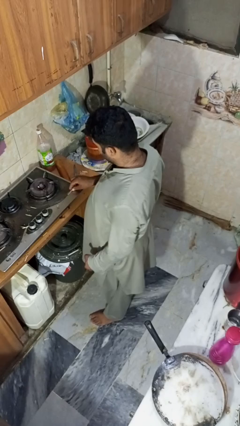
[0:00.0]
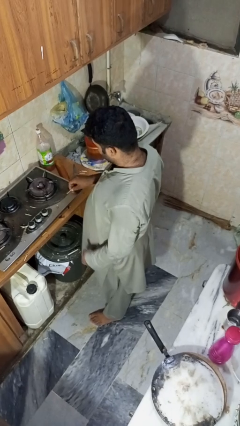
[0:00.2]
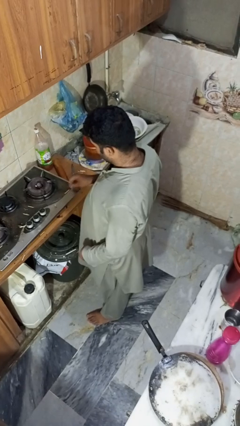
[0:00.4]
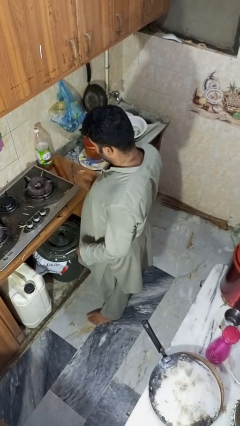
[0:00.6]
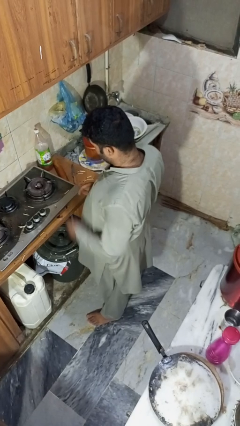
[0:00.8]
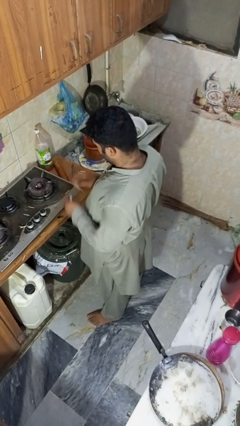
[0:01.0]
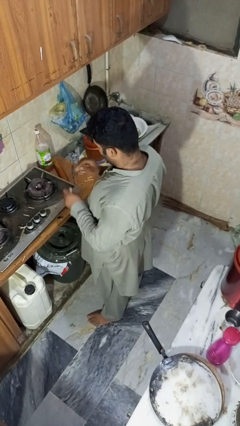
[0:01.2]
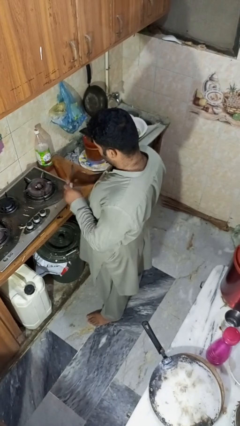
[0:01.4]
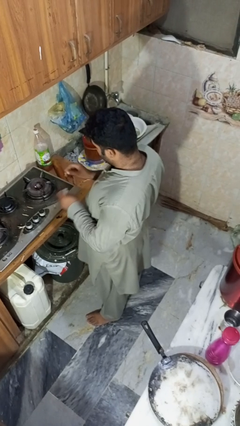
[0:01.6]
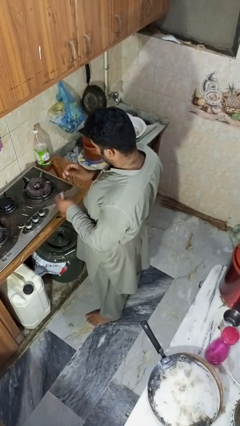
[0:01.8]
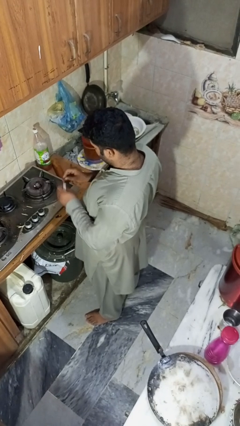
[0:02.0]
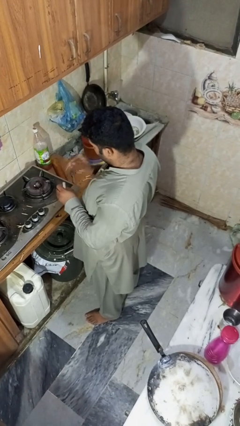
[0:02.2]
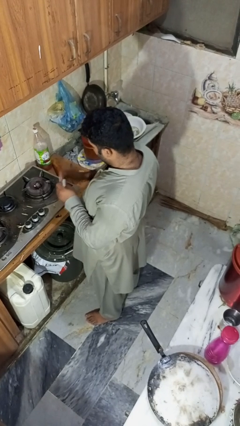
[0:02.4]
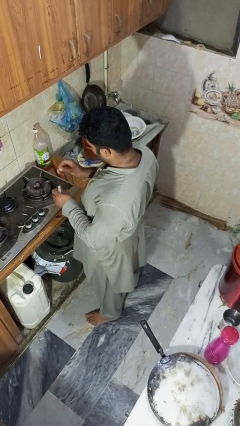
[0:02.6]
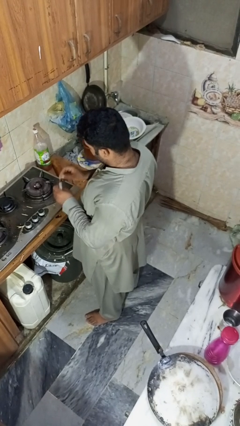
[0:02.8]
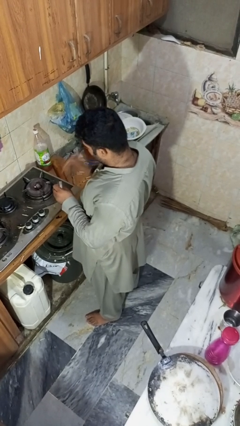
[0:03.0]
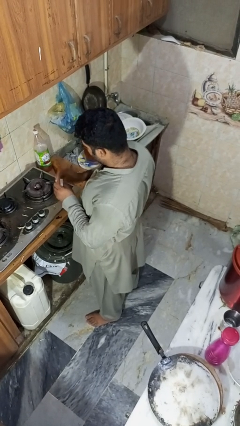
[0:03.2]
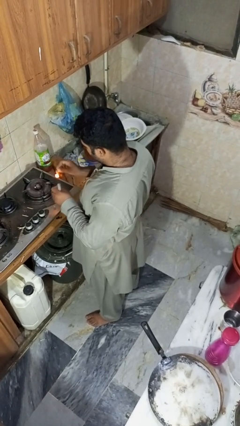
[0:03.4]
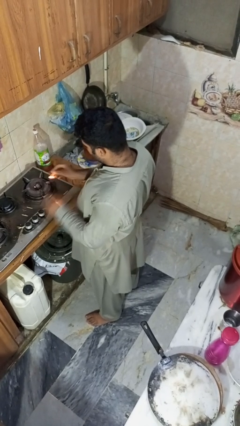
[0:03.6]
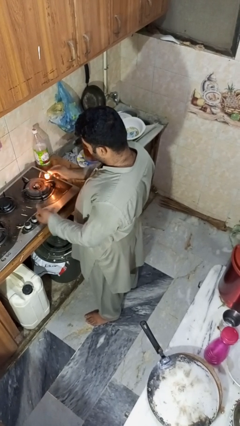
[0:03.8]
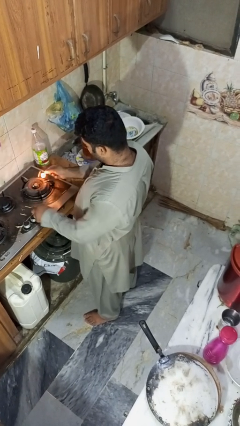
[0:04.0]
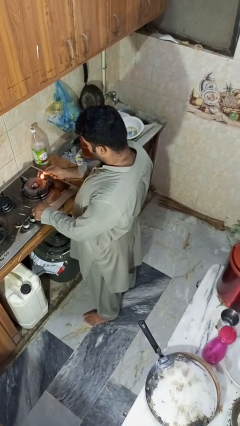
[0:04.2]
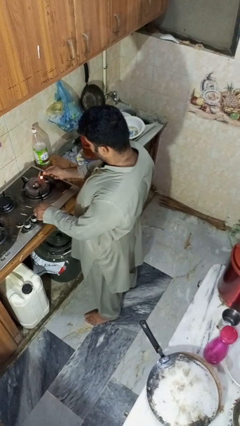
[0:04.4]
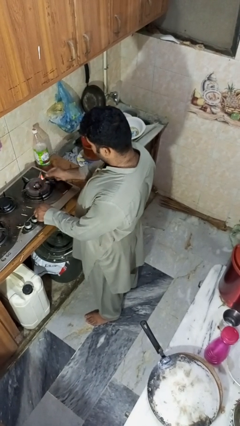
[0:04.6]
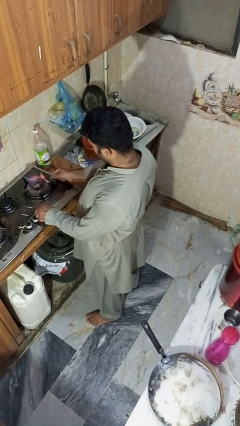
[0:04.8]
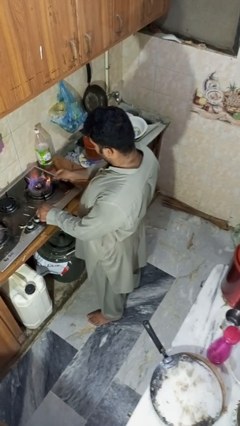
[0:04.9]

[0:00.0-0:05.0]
person turns on stovetop

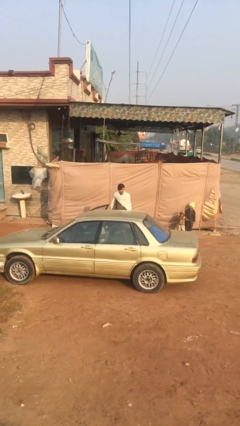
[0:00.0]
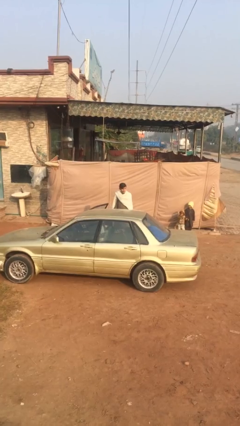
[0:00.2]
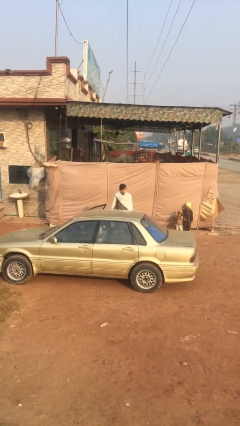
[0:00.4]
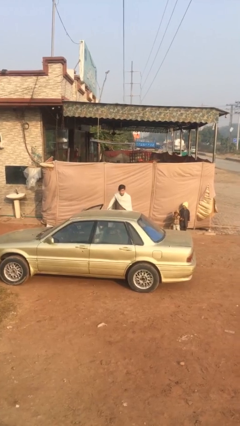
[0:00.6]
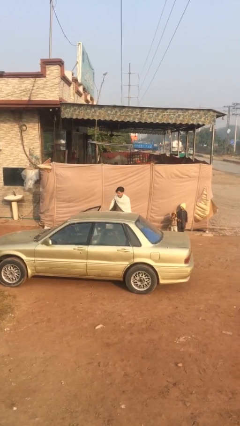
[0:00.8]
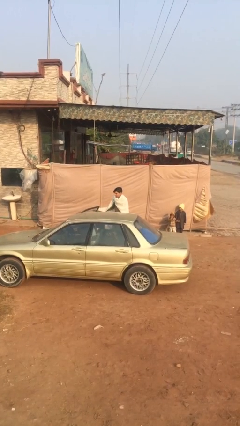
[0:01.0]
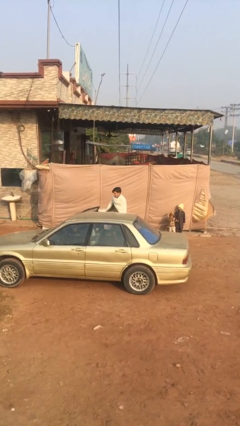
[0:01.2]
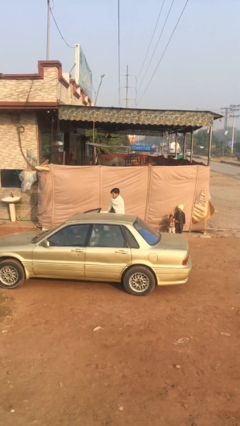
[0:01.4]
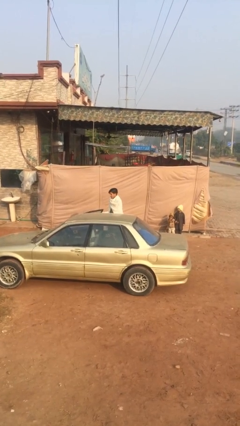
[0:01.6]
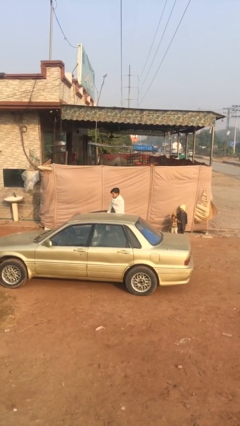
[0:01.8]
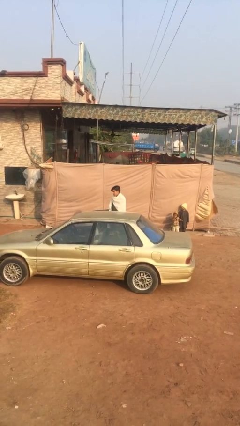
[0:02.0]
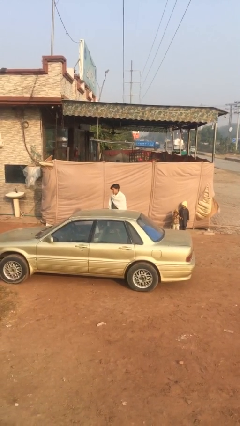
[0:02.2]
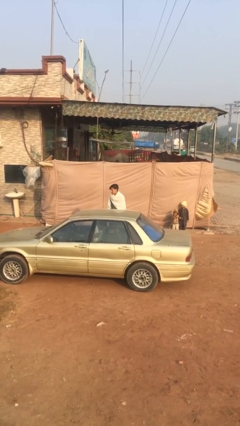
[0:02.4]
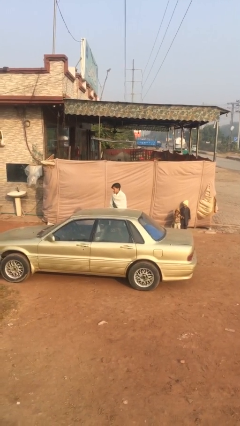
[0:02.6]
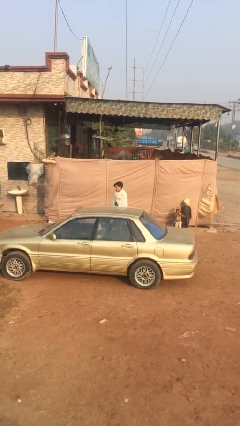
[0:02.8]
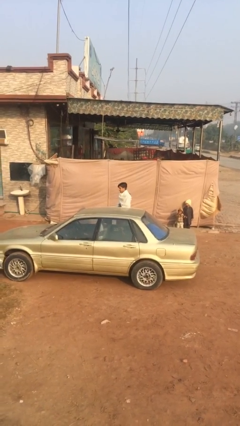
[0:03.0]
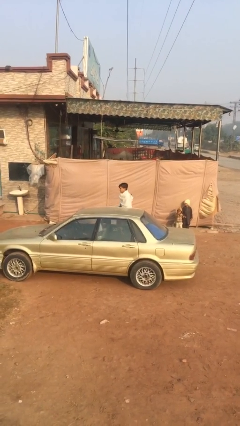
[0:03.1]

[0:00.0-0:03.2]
person closes car door

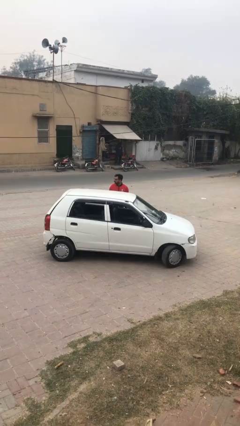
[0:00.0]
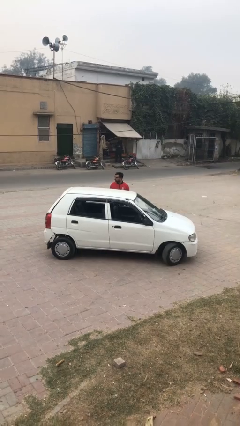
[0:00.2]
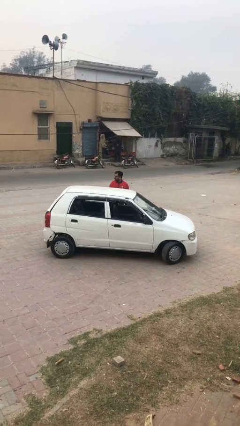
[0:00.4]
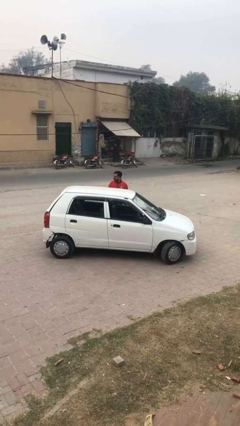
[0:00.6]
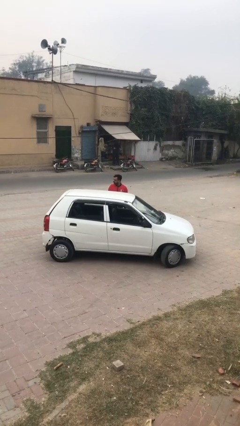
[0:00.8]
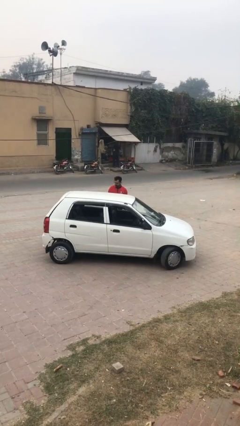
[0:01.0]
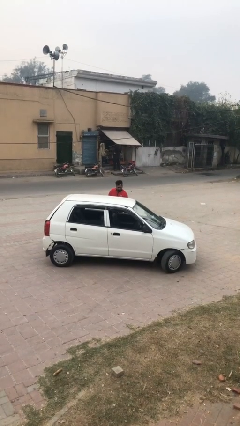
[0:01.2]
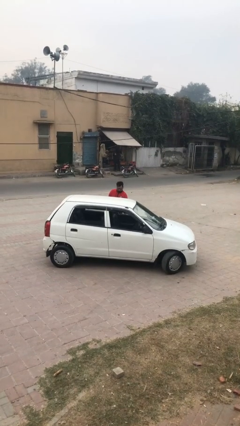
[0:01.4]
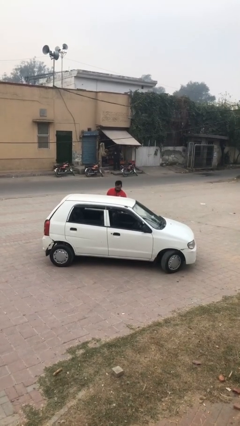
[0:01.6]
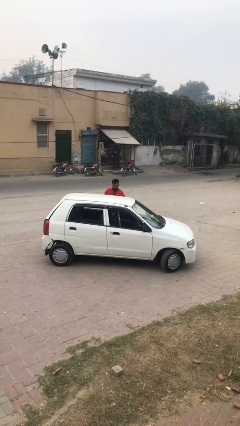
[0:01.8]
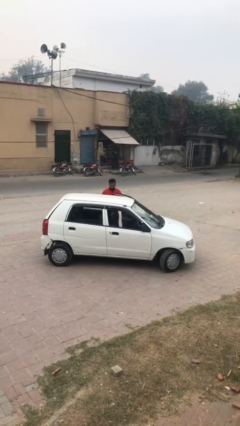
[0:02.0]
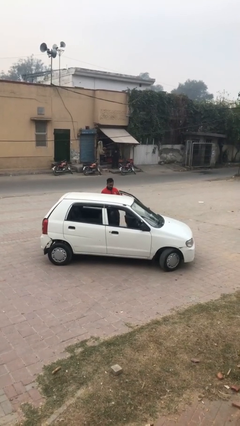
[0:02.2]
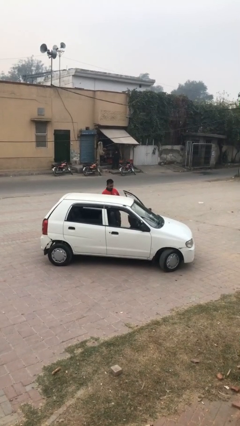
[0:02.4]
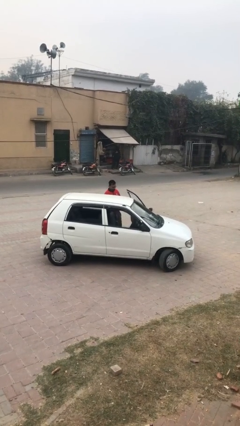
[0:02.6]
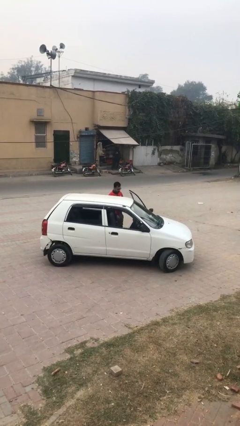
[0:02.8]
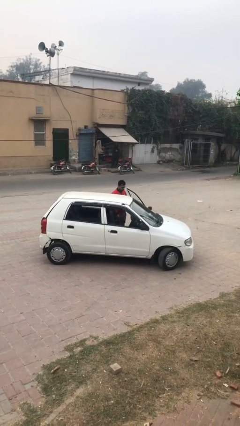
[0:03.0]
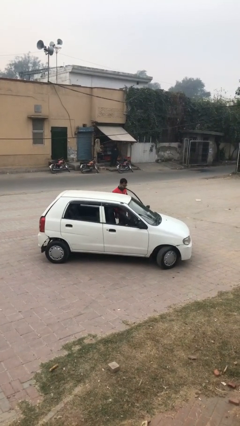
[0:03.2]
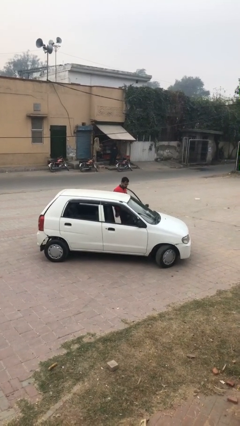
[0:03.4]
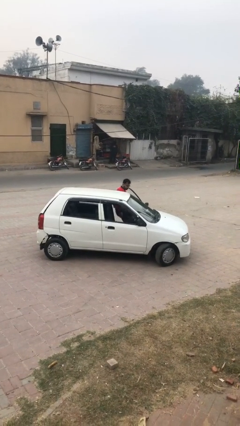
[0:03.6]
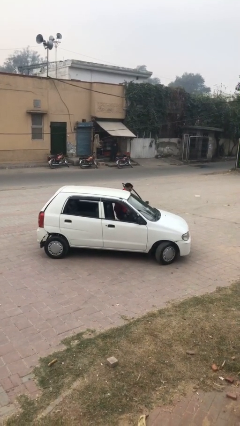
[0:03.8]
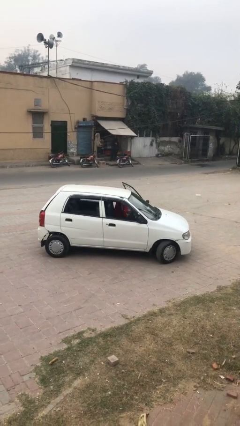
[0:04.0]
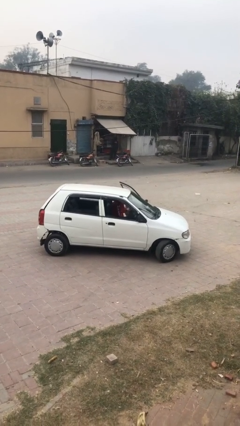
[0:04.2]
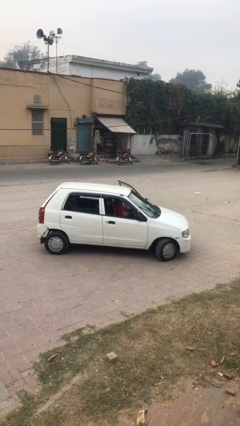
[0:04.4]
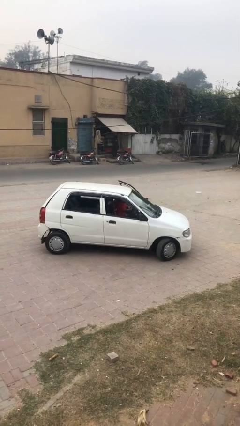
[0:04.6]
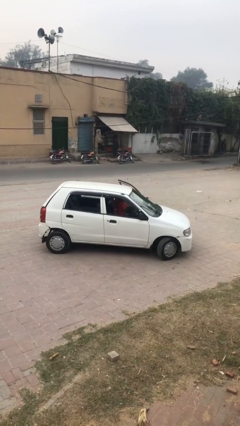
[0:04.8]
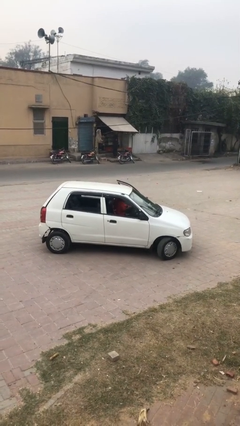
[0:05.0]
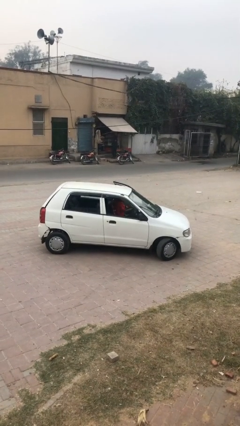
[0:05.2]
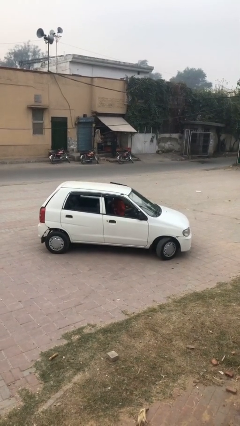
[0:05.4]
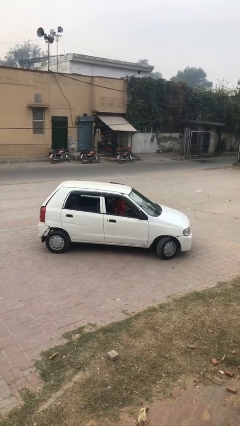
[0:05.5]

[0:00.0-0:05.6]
person enters car

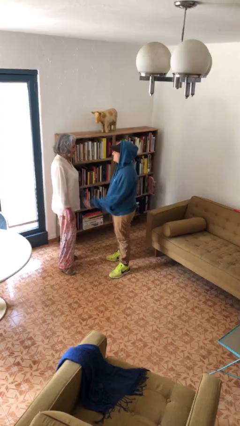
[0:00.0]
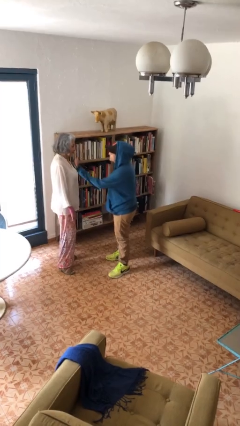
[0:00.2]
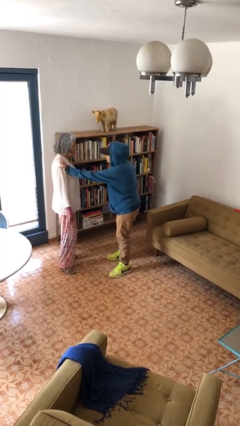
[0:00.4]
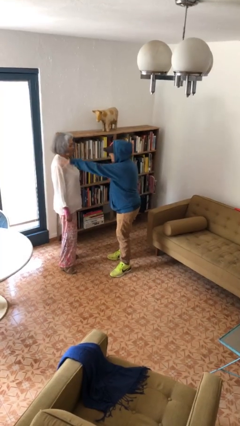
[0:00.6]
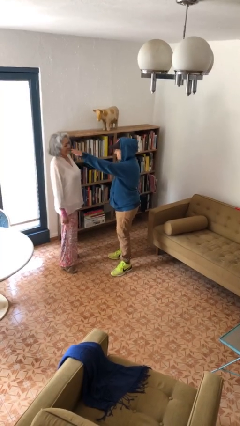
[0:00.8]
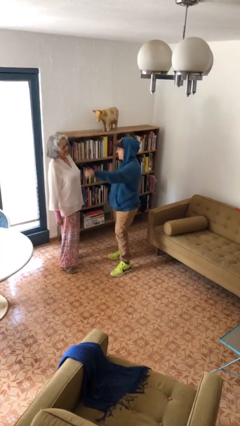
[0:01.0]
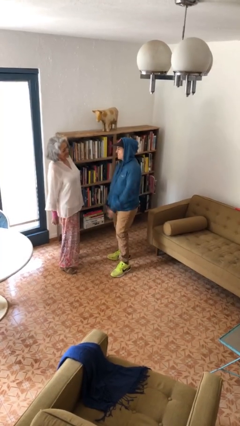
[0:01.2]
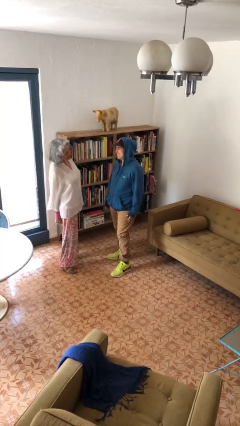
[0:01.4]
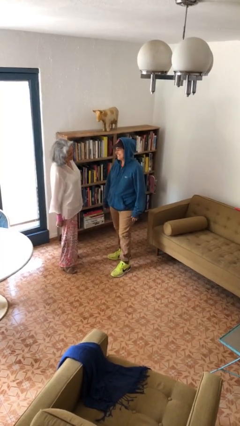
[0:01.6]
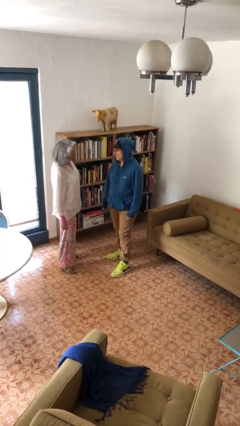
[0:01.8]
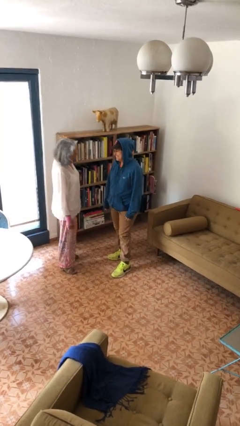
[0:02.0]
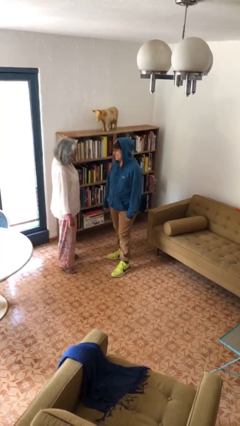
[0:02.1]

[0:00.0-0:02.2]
person shoves person

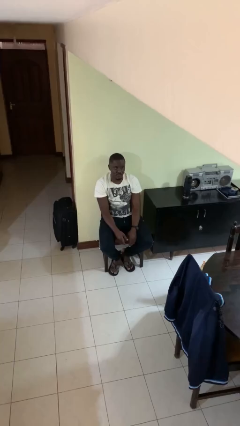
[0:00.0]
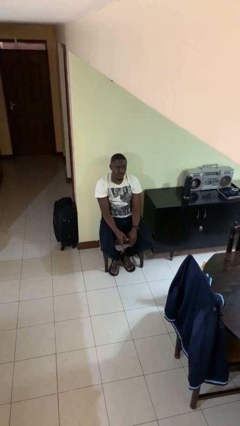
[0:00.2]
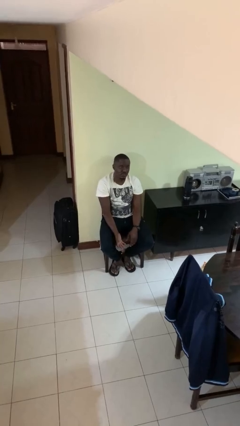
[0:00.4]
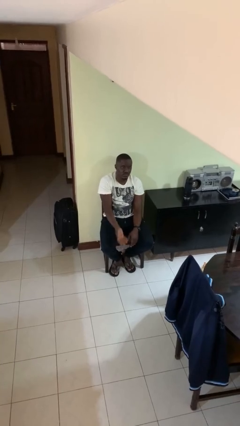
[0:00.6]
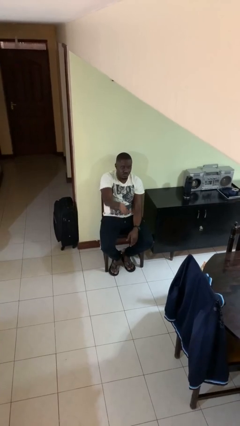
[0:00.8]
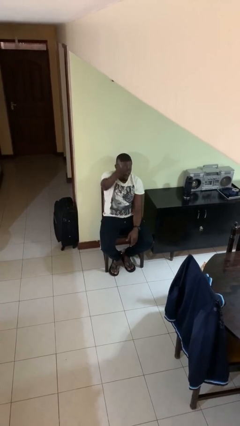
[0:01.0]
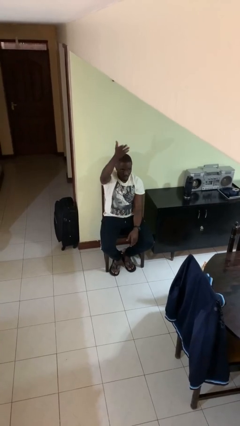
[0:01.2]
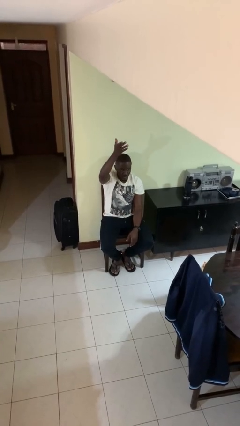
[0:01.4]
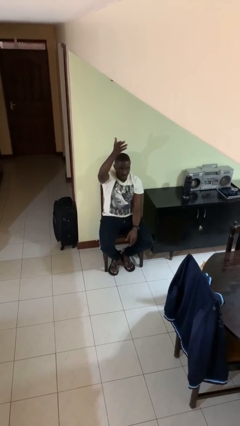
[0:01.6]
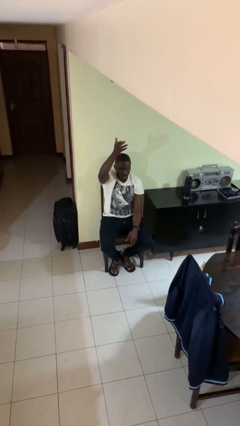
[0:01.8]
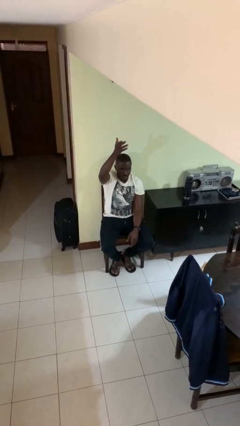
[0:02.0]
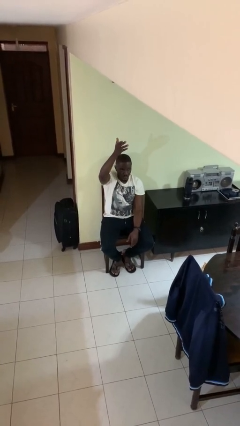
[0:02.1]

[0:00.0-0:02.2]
person gestures swipe up
